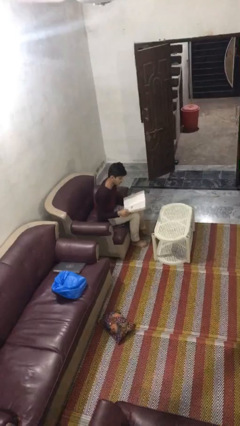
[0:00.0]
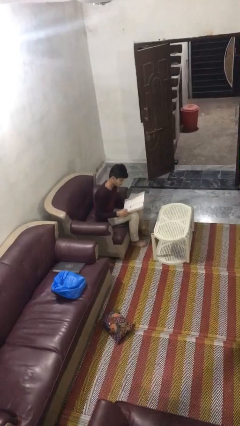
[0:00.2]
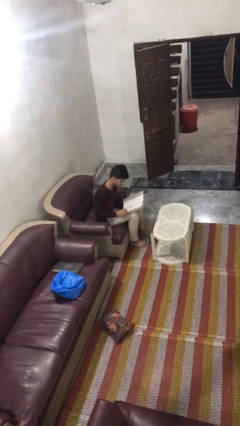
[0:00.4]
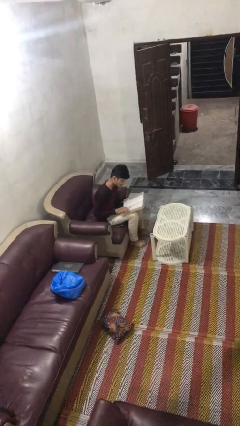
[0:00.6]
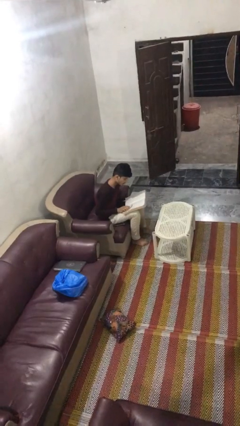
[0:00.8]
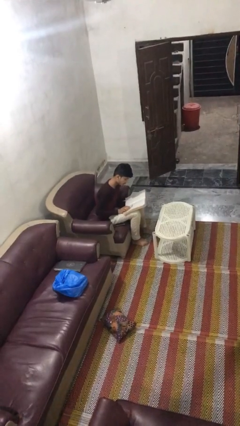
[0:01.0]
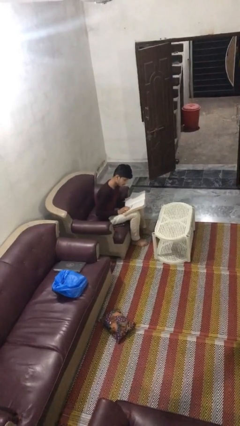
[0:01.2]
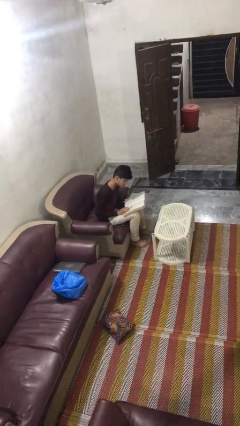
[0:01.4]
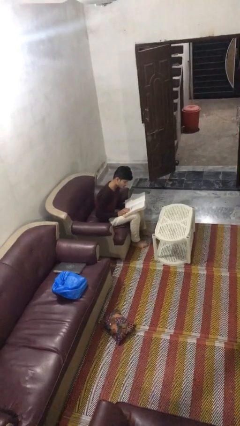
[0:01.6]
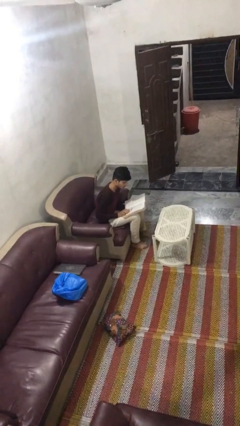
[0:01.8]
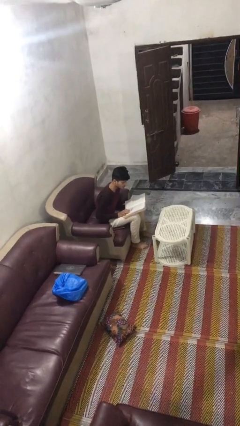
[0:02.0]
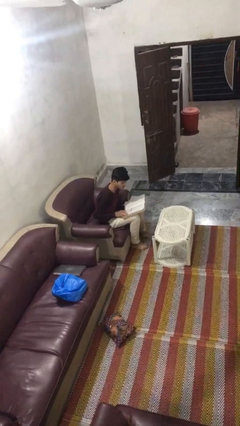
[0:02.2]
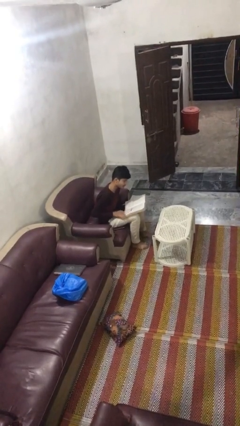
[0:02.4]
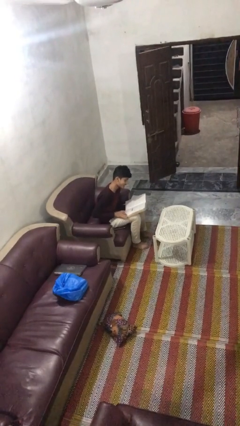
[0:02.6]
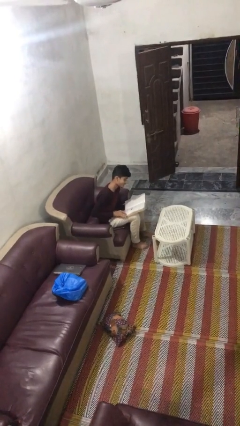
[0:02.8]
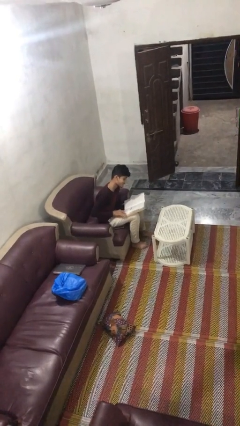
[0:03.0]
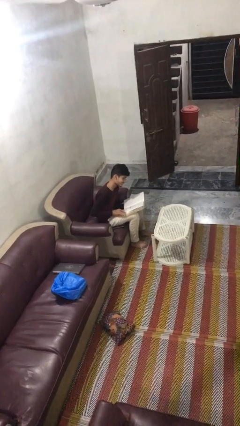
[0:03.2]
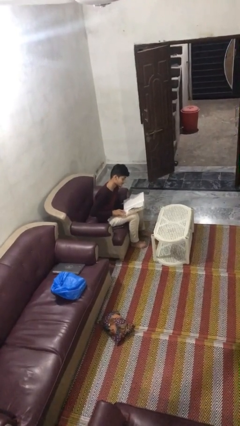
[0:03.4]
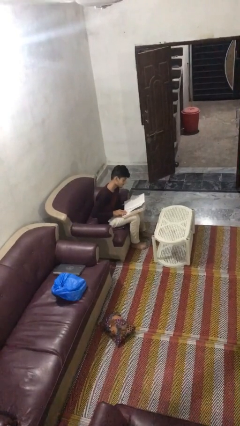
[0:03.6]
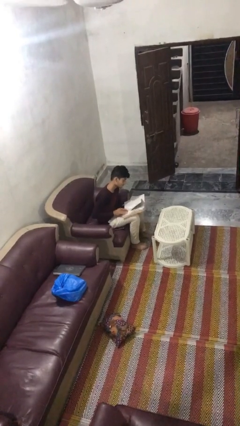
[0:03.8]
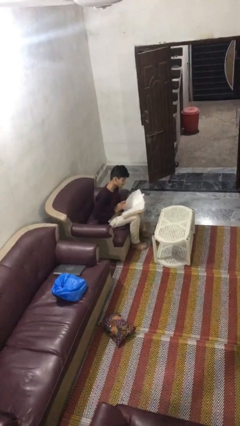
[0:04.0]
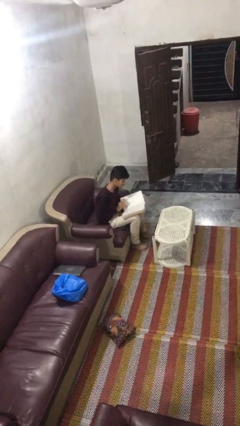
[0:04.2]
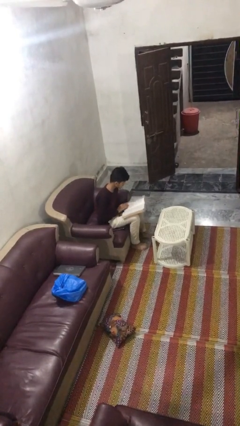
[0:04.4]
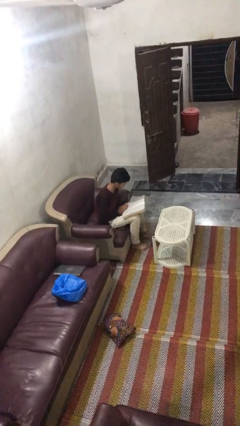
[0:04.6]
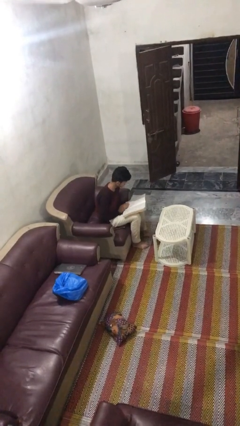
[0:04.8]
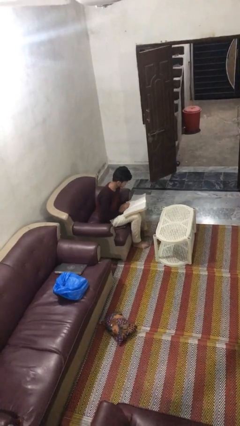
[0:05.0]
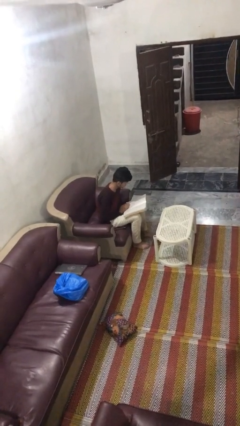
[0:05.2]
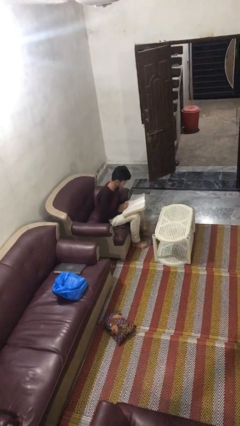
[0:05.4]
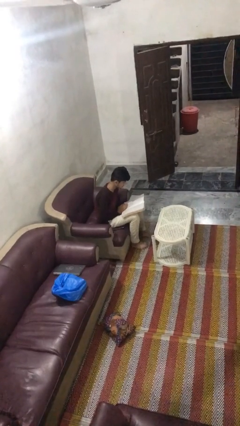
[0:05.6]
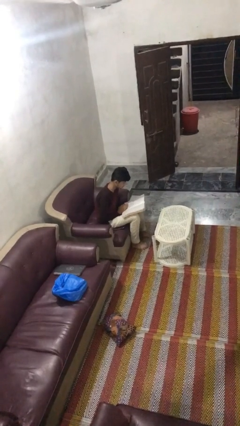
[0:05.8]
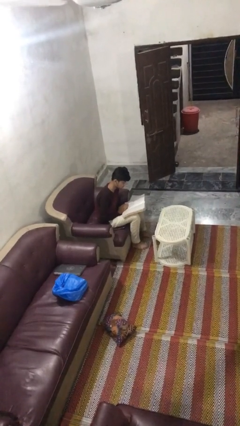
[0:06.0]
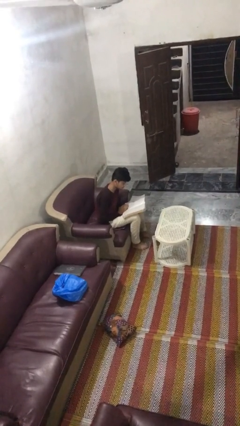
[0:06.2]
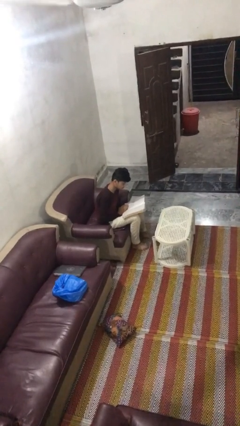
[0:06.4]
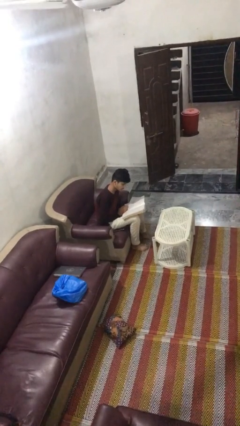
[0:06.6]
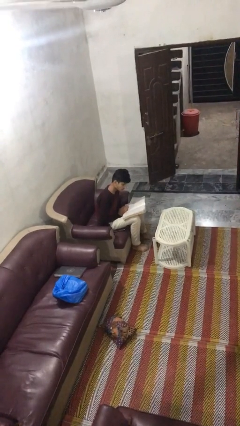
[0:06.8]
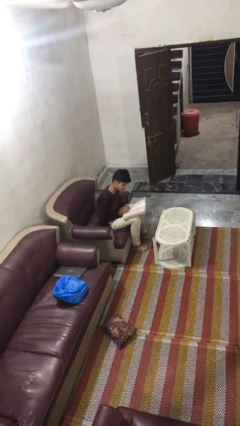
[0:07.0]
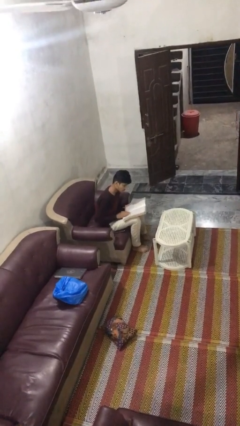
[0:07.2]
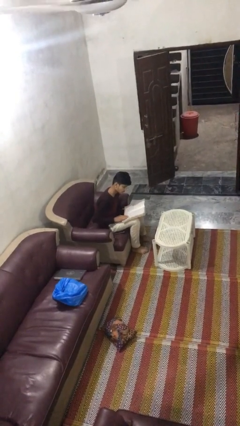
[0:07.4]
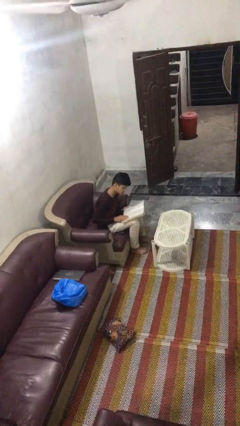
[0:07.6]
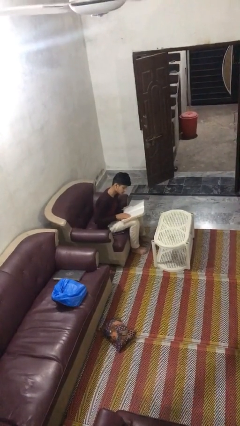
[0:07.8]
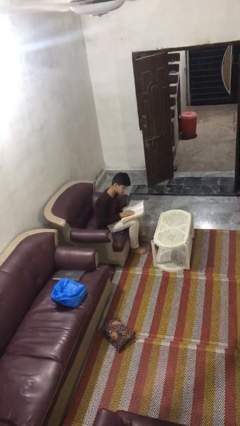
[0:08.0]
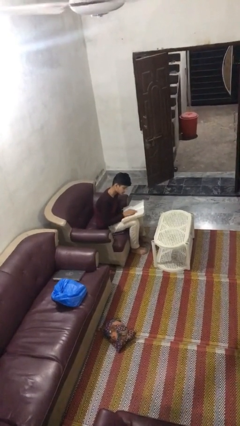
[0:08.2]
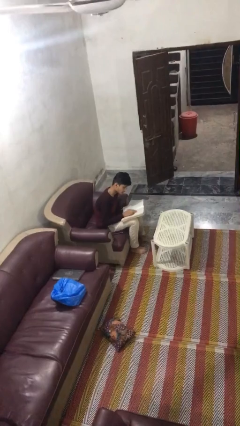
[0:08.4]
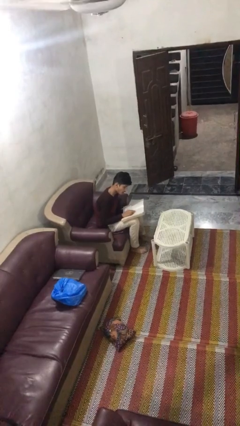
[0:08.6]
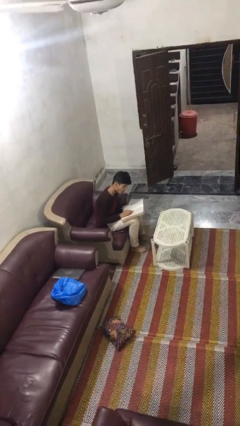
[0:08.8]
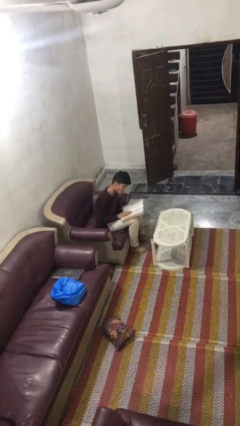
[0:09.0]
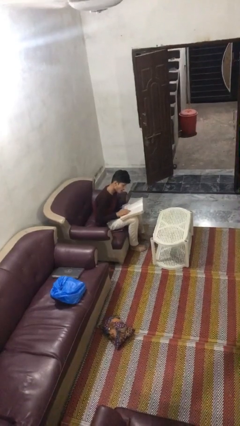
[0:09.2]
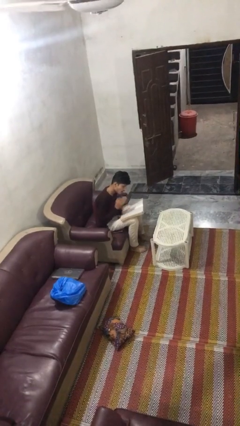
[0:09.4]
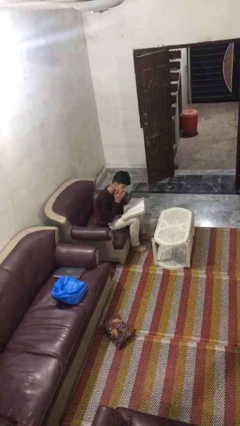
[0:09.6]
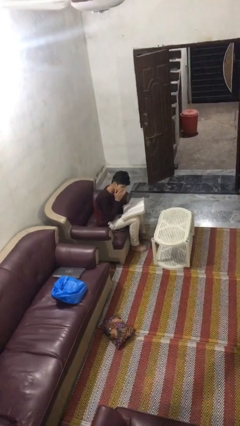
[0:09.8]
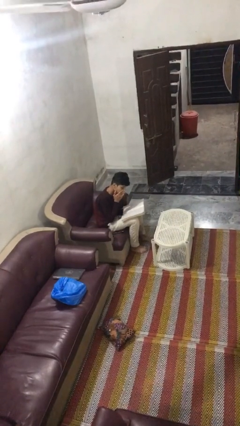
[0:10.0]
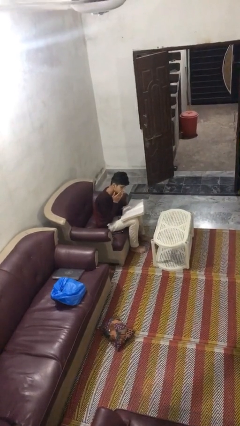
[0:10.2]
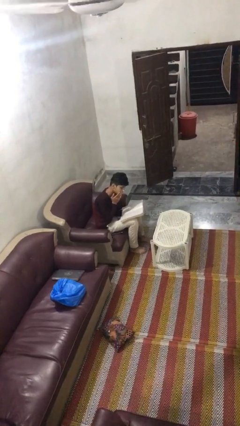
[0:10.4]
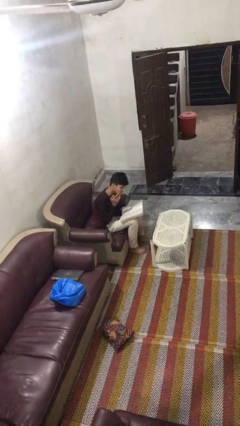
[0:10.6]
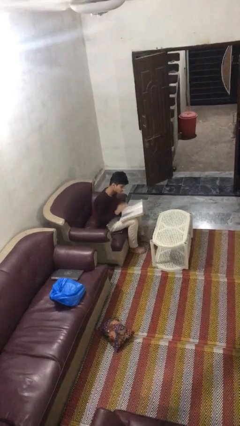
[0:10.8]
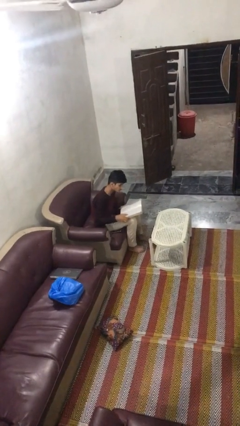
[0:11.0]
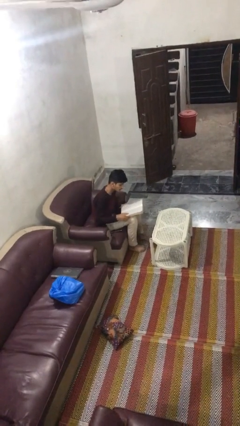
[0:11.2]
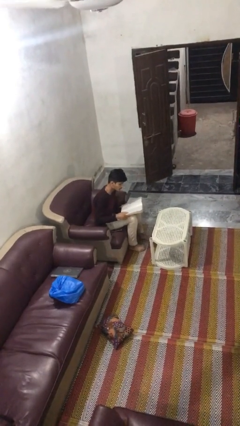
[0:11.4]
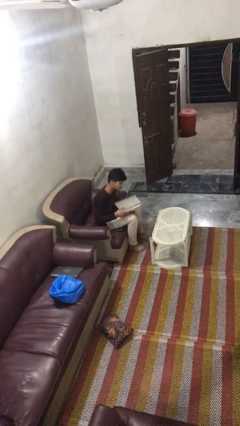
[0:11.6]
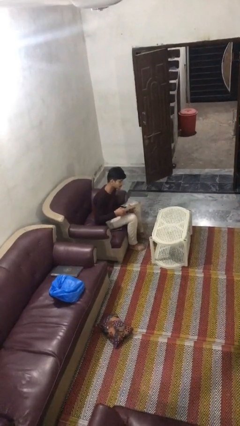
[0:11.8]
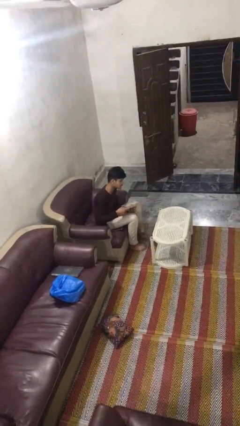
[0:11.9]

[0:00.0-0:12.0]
person reads document

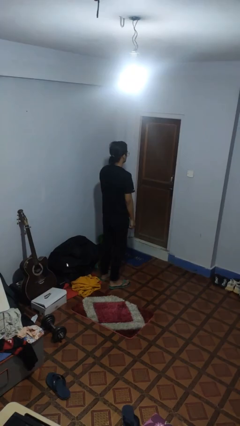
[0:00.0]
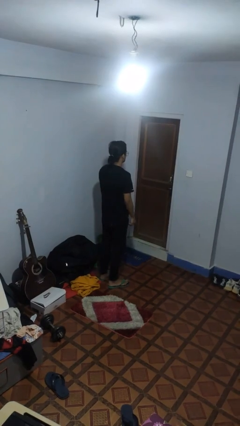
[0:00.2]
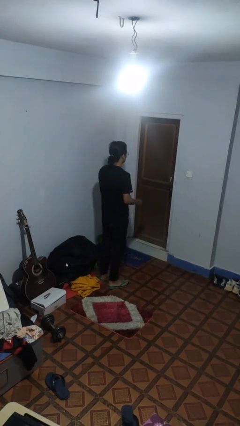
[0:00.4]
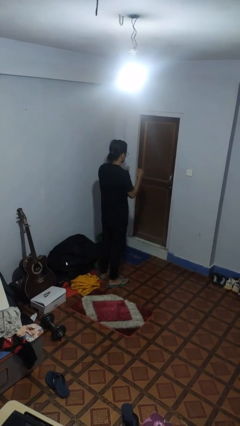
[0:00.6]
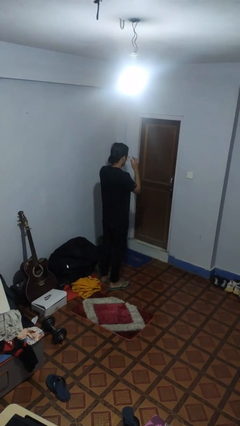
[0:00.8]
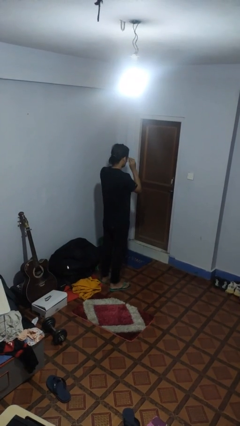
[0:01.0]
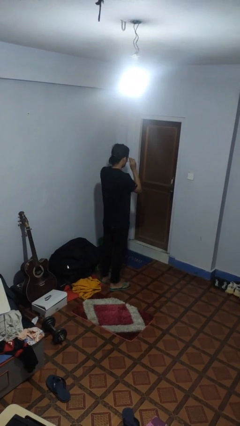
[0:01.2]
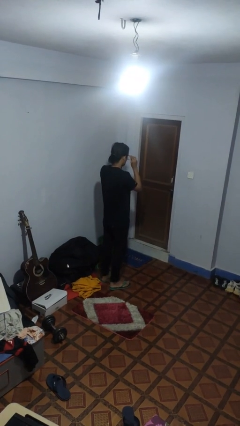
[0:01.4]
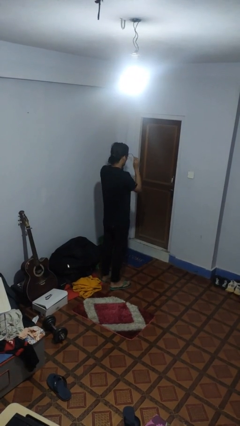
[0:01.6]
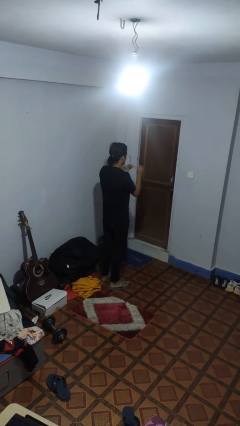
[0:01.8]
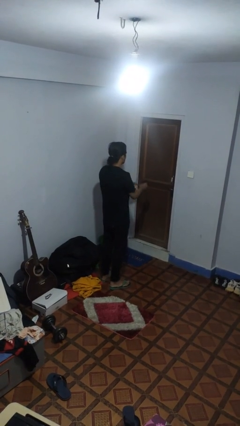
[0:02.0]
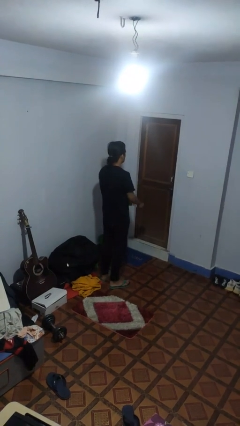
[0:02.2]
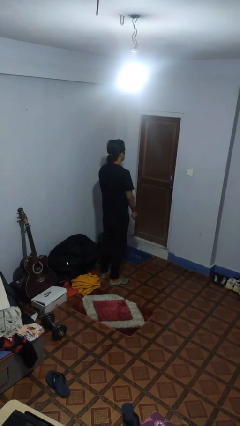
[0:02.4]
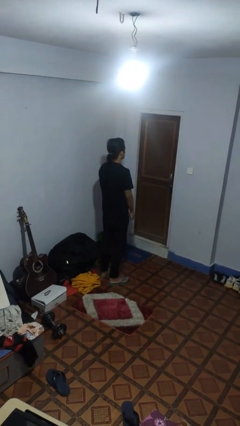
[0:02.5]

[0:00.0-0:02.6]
person takes off glasses

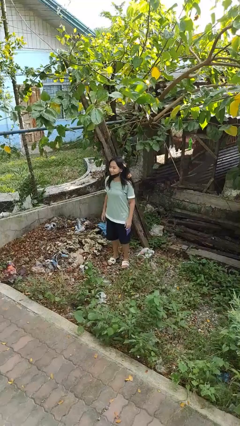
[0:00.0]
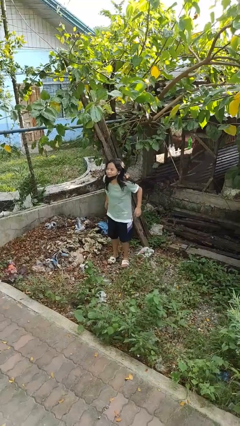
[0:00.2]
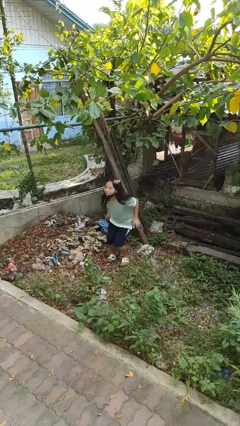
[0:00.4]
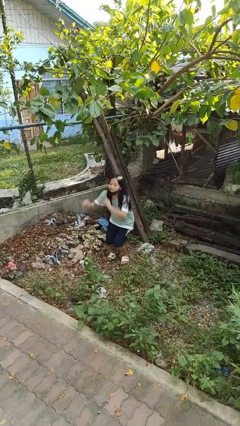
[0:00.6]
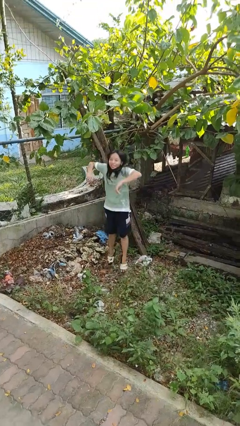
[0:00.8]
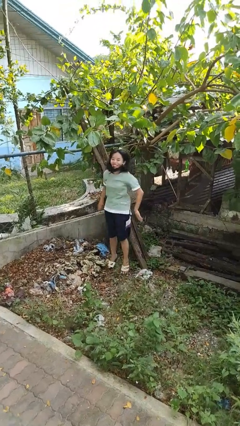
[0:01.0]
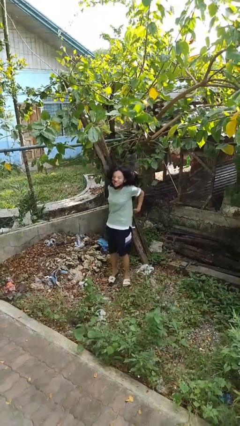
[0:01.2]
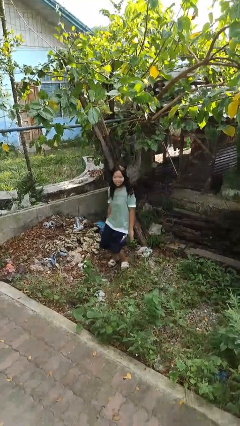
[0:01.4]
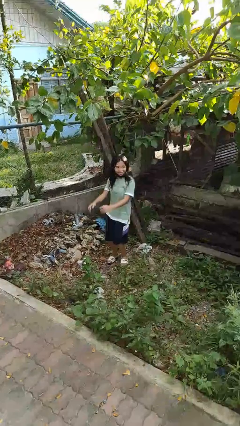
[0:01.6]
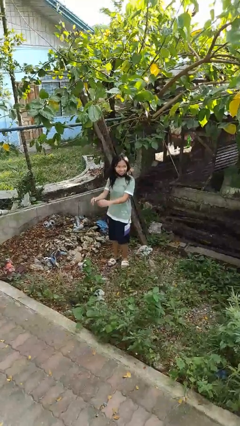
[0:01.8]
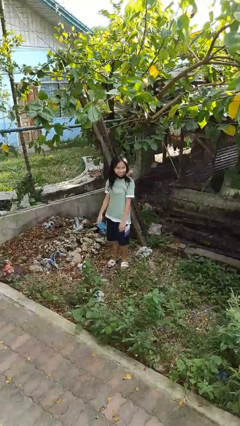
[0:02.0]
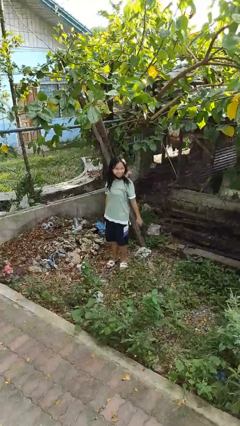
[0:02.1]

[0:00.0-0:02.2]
person jumps

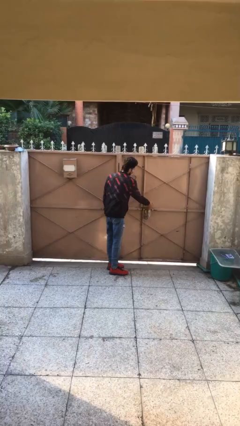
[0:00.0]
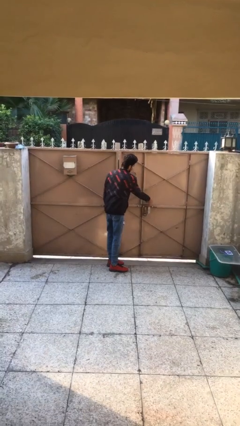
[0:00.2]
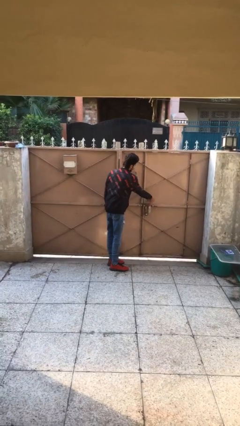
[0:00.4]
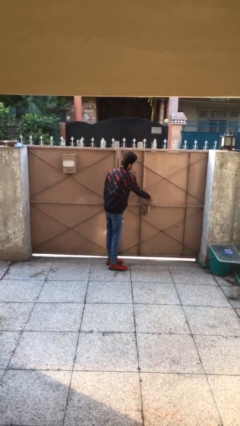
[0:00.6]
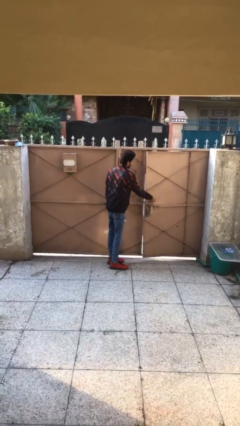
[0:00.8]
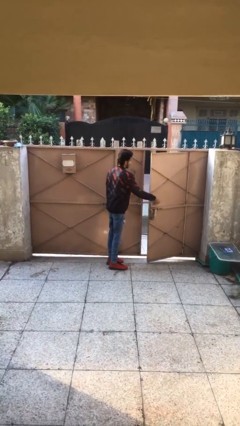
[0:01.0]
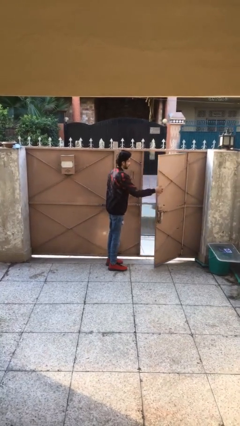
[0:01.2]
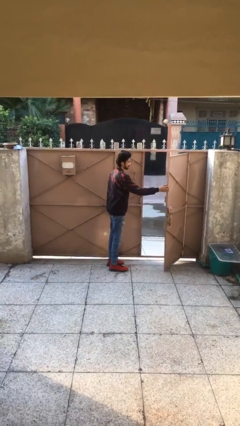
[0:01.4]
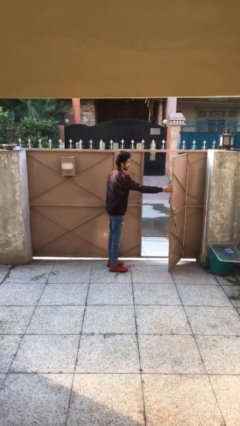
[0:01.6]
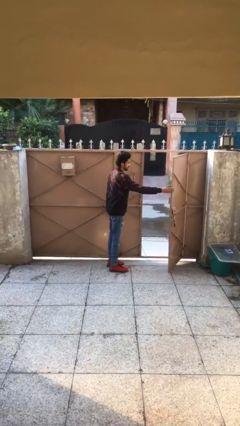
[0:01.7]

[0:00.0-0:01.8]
person opens facility door
